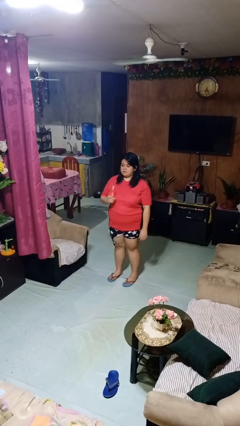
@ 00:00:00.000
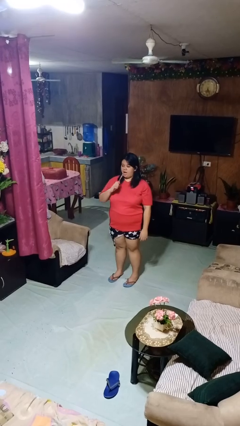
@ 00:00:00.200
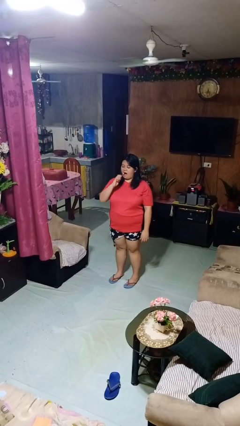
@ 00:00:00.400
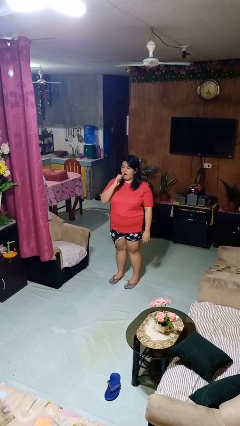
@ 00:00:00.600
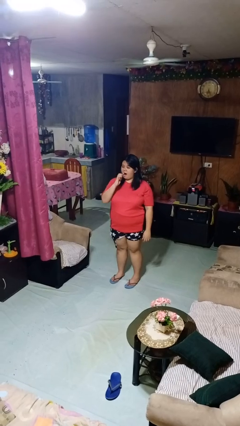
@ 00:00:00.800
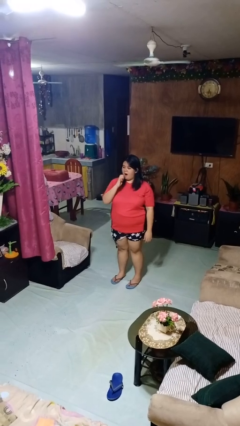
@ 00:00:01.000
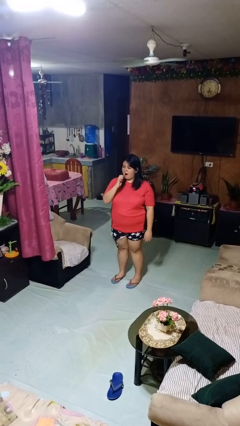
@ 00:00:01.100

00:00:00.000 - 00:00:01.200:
person brushes teeth

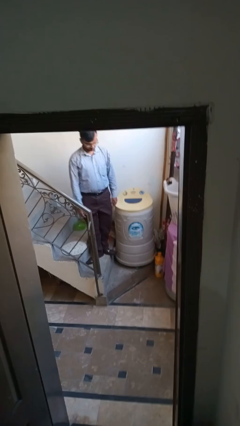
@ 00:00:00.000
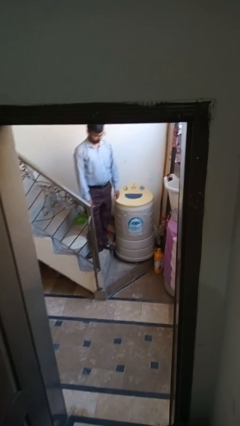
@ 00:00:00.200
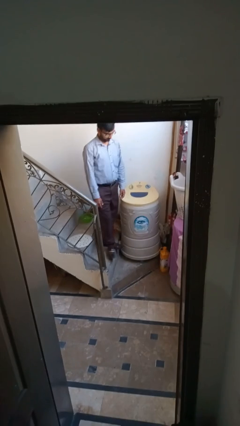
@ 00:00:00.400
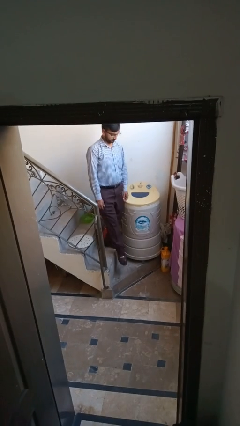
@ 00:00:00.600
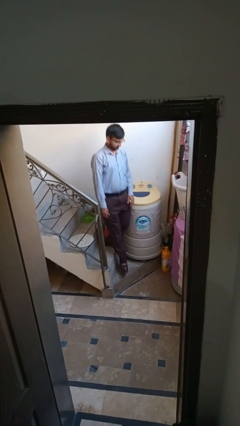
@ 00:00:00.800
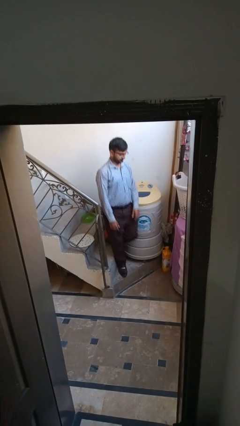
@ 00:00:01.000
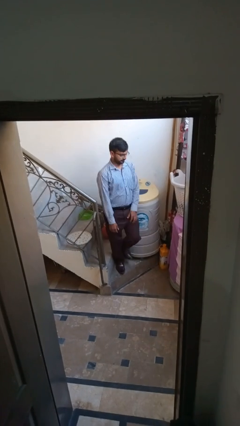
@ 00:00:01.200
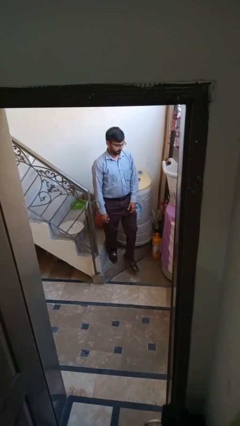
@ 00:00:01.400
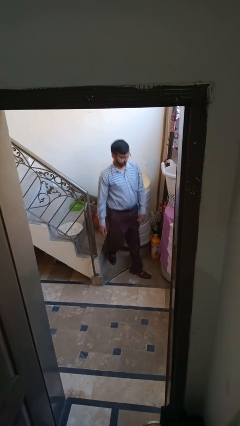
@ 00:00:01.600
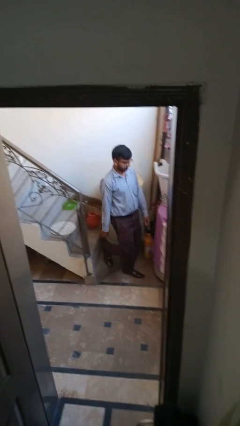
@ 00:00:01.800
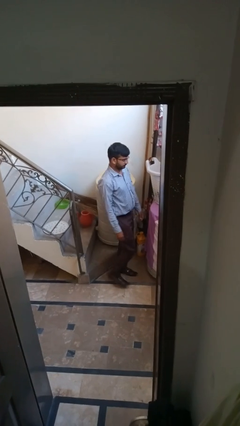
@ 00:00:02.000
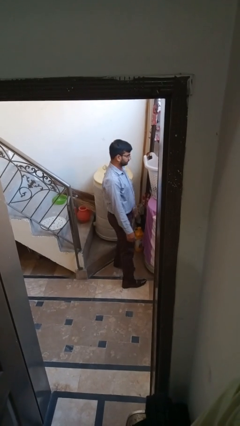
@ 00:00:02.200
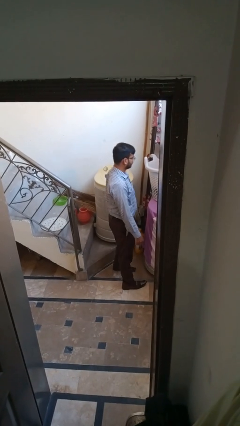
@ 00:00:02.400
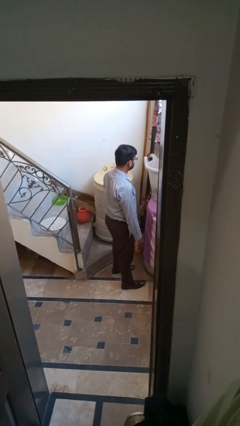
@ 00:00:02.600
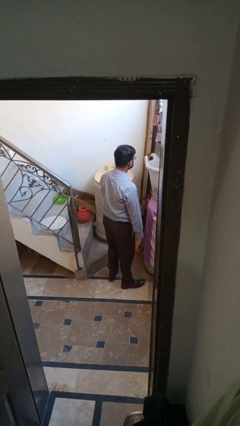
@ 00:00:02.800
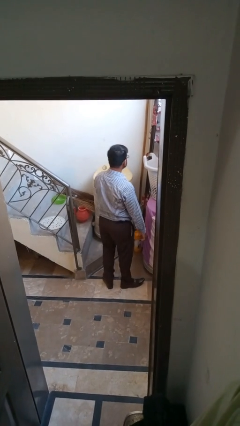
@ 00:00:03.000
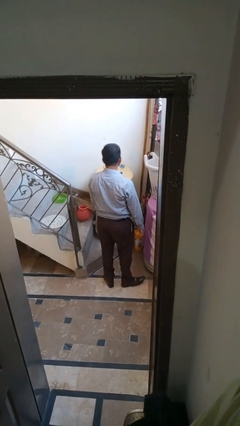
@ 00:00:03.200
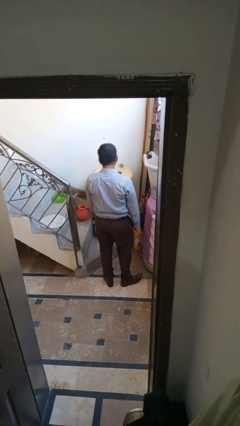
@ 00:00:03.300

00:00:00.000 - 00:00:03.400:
person climbs down stairs

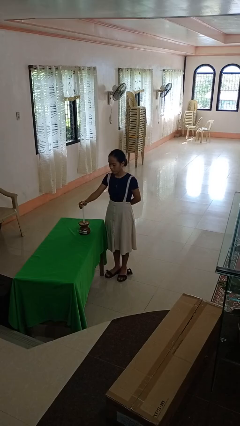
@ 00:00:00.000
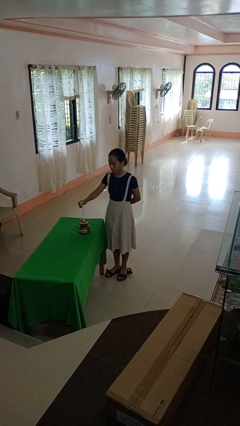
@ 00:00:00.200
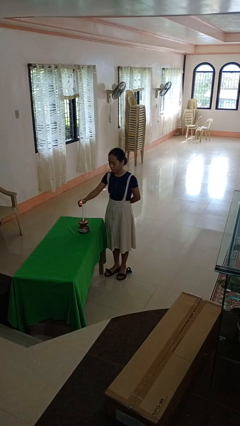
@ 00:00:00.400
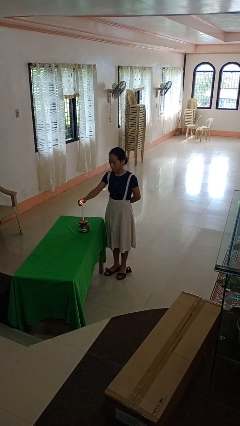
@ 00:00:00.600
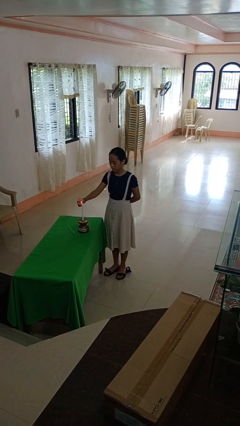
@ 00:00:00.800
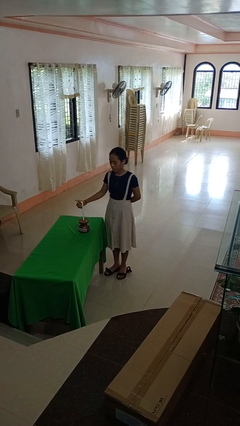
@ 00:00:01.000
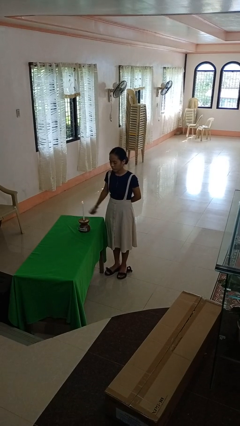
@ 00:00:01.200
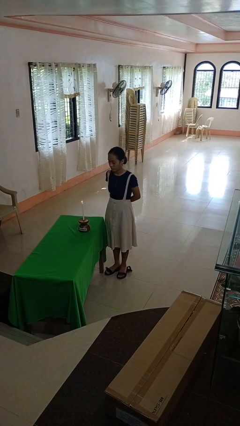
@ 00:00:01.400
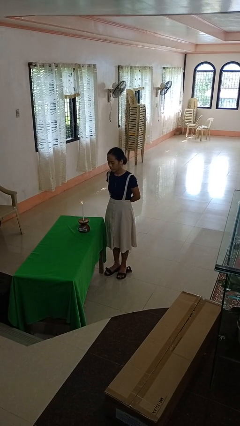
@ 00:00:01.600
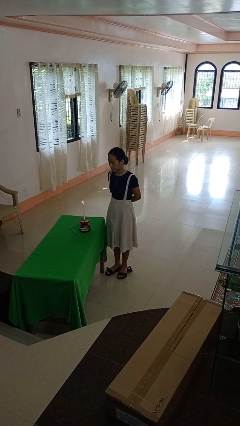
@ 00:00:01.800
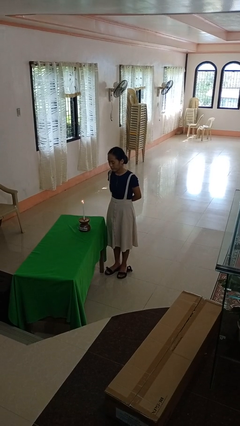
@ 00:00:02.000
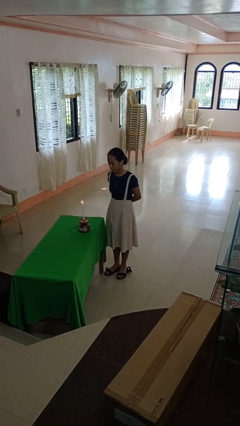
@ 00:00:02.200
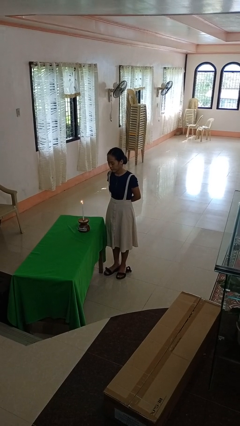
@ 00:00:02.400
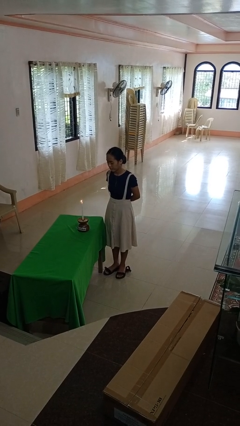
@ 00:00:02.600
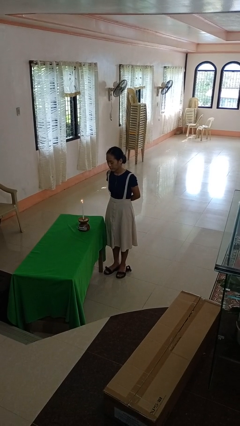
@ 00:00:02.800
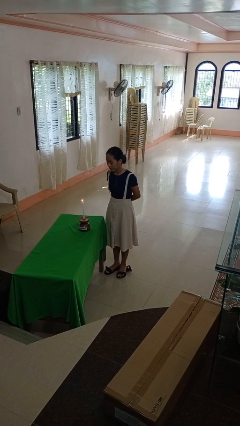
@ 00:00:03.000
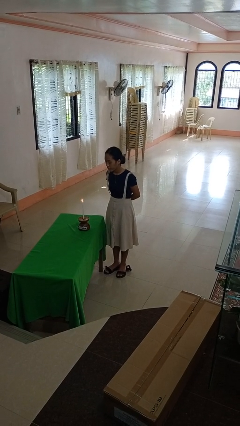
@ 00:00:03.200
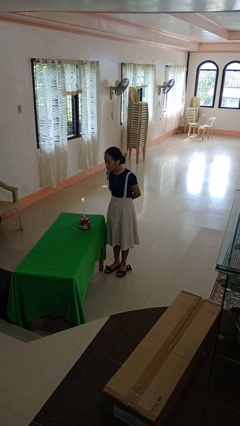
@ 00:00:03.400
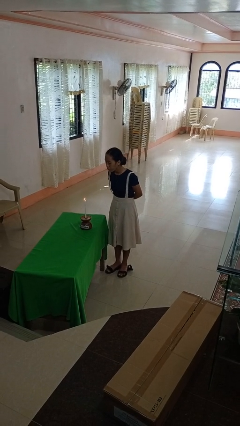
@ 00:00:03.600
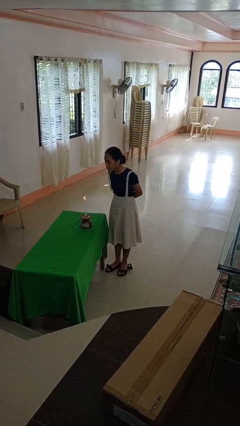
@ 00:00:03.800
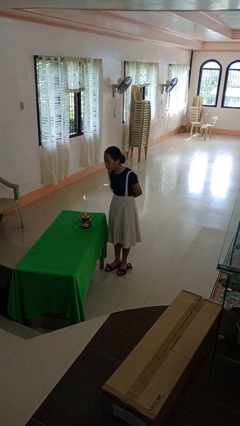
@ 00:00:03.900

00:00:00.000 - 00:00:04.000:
person lights candle

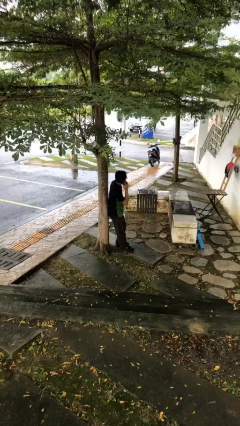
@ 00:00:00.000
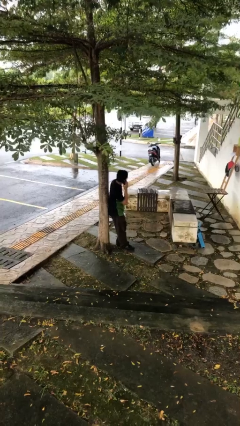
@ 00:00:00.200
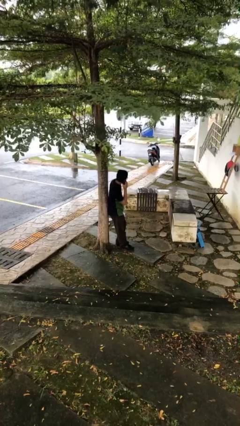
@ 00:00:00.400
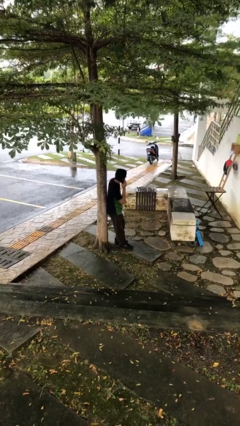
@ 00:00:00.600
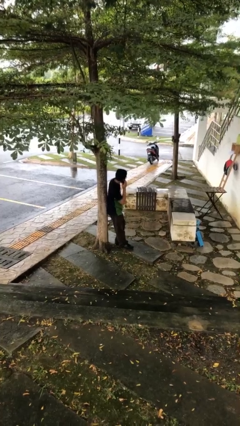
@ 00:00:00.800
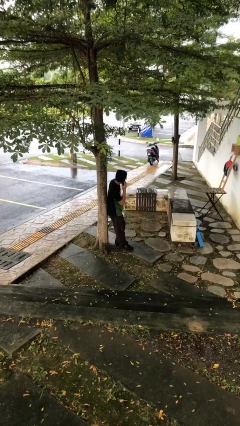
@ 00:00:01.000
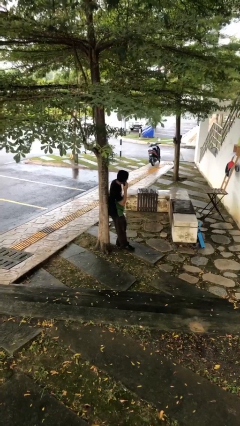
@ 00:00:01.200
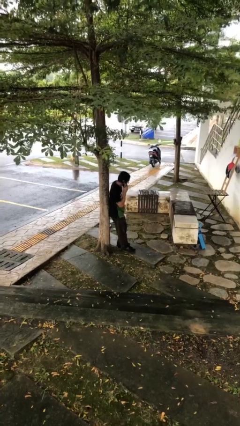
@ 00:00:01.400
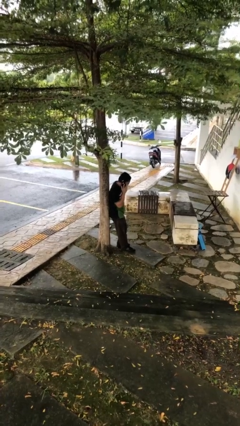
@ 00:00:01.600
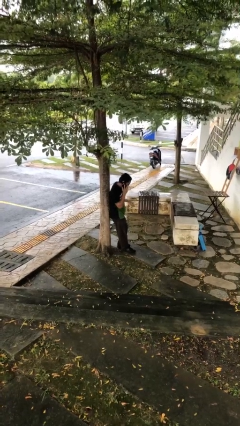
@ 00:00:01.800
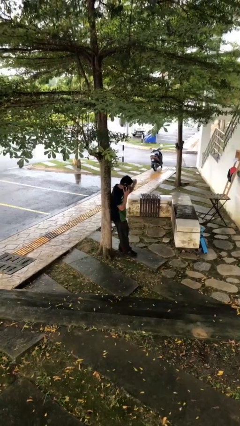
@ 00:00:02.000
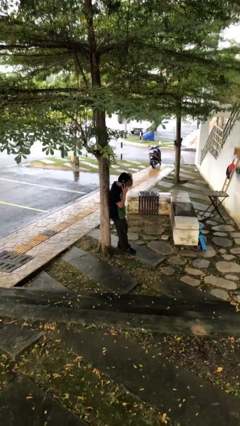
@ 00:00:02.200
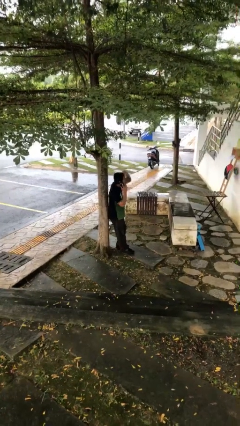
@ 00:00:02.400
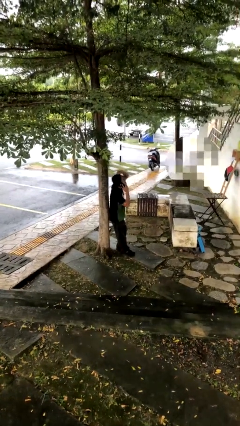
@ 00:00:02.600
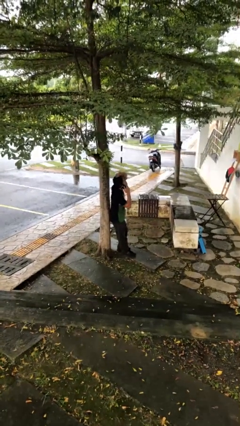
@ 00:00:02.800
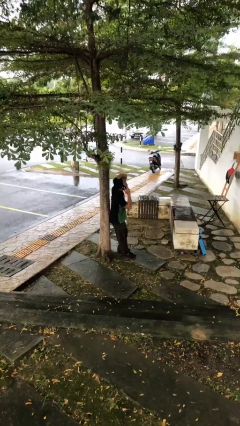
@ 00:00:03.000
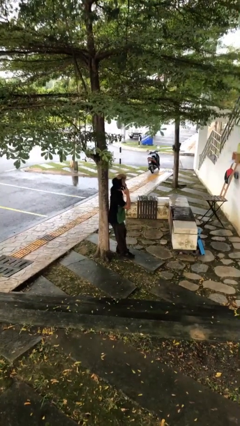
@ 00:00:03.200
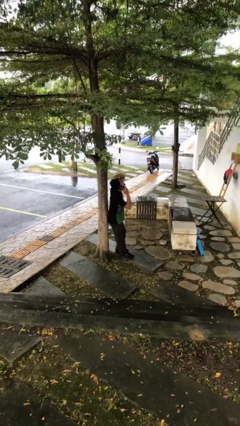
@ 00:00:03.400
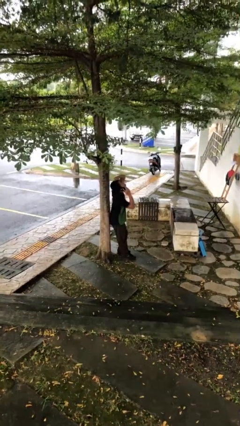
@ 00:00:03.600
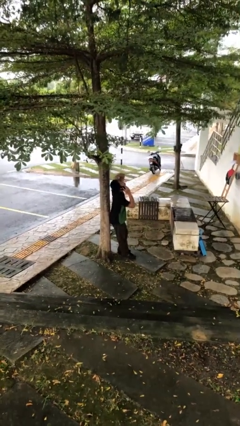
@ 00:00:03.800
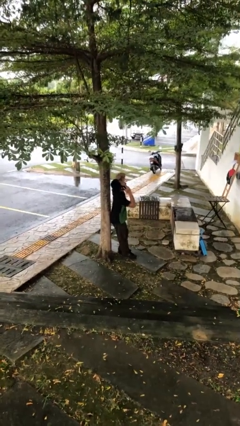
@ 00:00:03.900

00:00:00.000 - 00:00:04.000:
person talks on phone

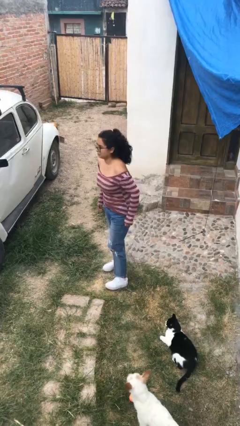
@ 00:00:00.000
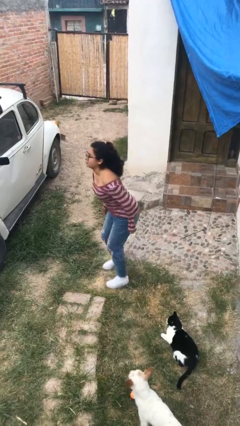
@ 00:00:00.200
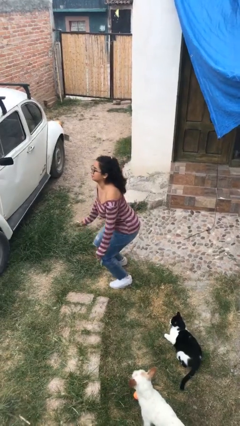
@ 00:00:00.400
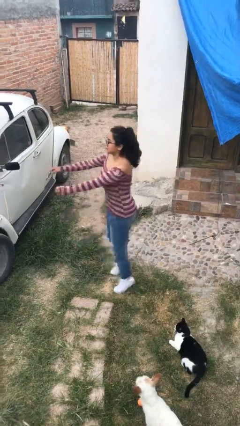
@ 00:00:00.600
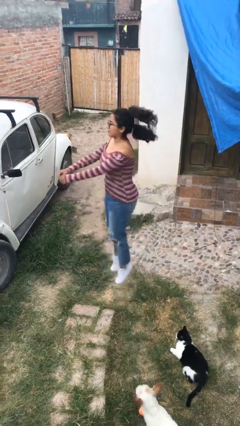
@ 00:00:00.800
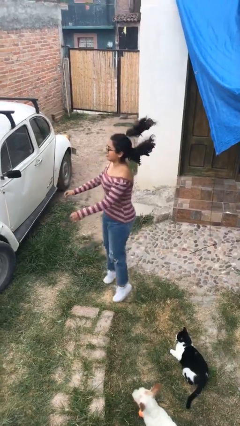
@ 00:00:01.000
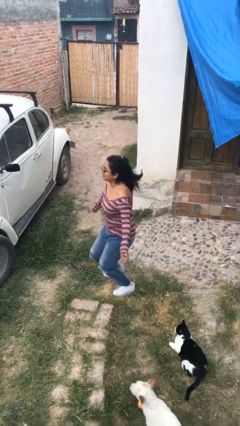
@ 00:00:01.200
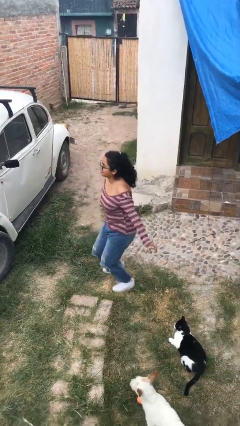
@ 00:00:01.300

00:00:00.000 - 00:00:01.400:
person jumps

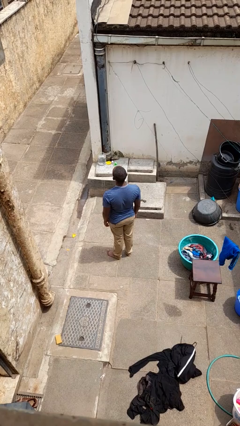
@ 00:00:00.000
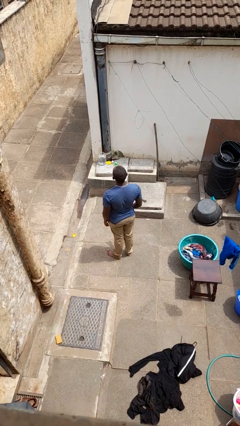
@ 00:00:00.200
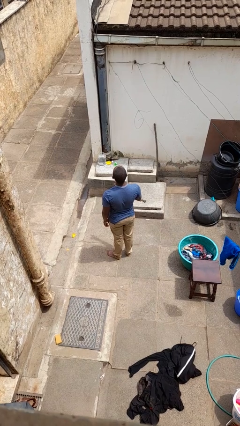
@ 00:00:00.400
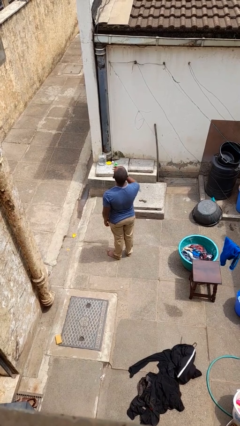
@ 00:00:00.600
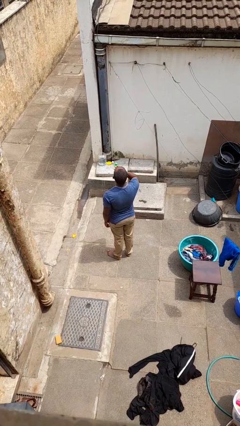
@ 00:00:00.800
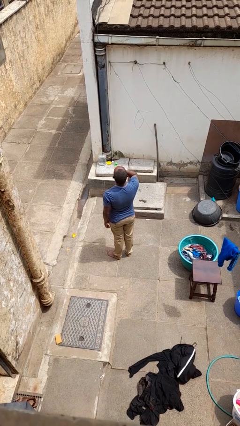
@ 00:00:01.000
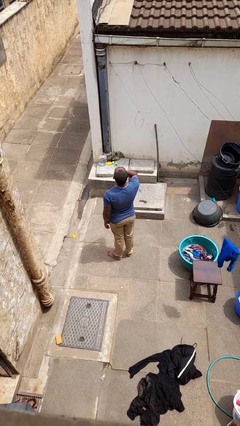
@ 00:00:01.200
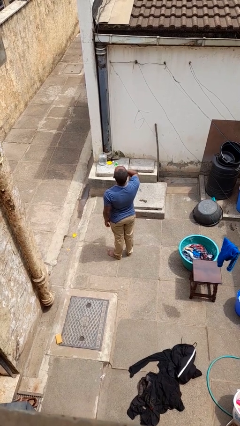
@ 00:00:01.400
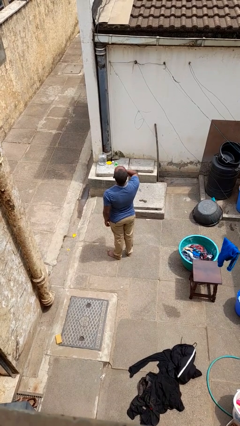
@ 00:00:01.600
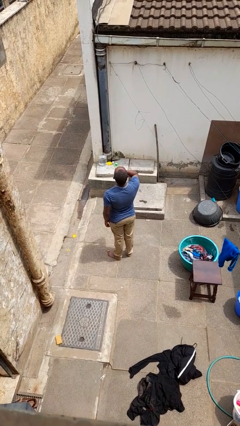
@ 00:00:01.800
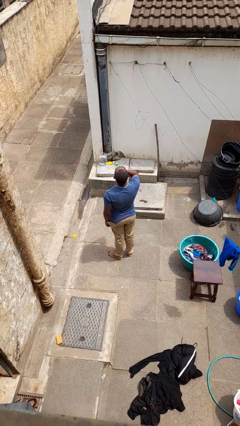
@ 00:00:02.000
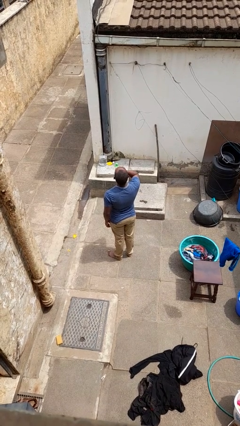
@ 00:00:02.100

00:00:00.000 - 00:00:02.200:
person yawns

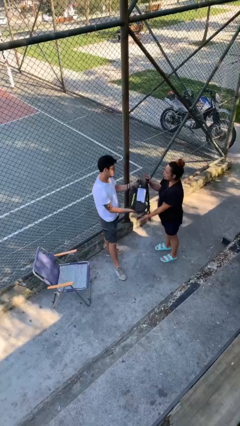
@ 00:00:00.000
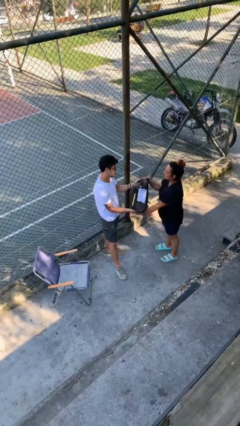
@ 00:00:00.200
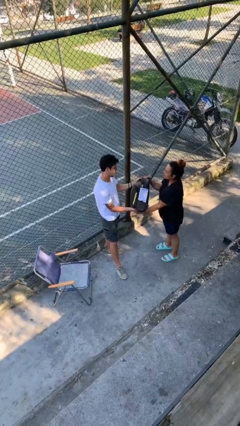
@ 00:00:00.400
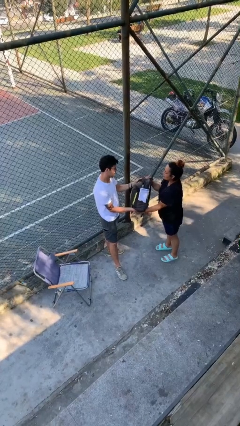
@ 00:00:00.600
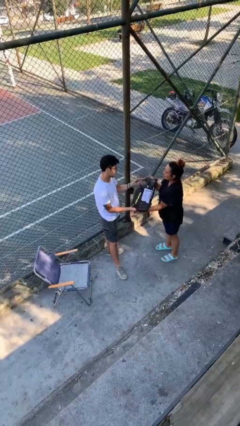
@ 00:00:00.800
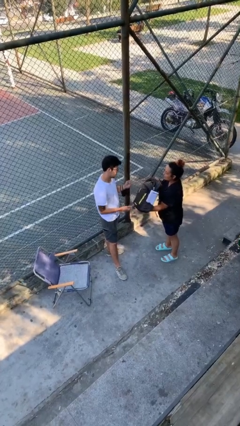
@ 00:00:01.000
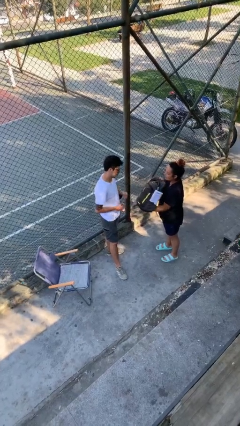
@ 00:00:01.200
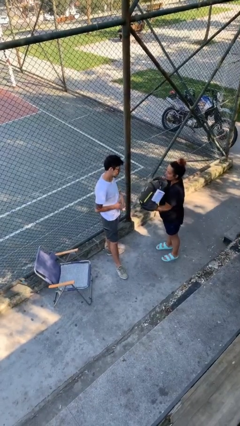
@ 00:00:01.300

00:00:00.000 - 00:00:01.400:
person transfers object to person
